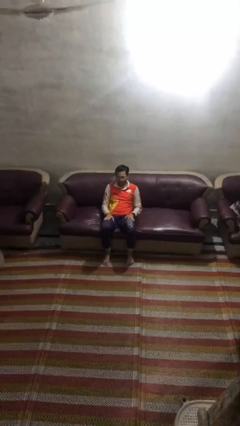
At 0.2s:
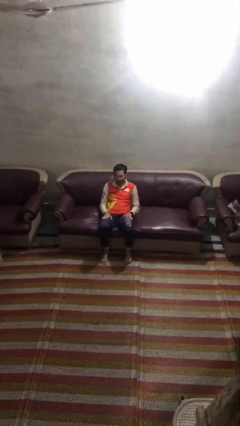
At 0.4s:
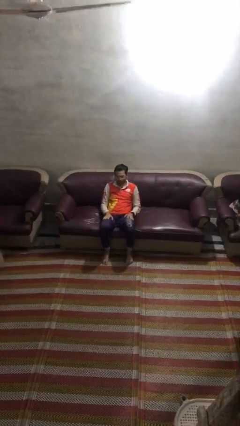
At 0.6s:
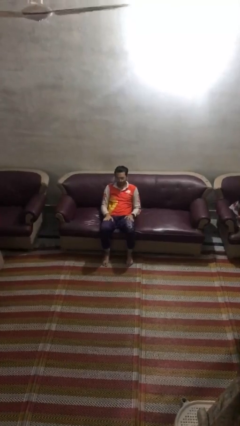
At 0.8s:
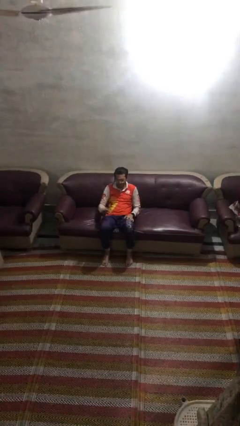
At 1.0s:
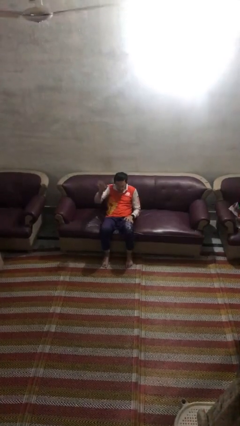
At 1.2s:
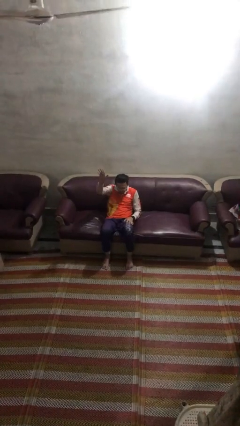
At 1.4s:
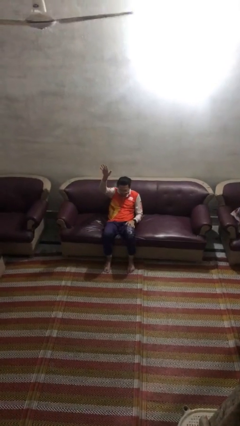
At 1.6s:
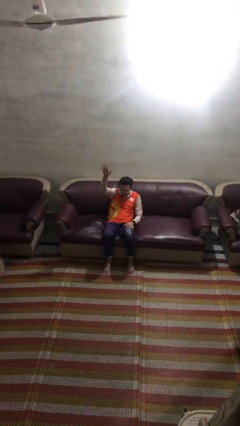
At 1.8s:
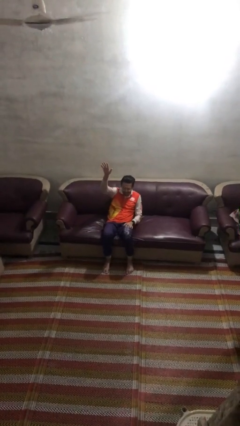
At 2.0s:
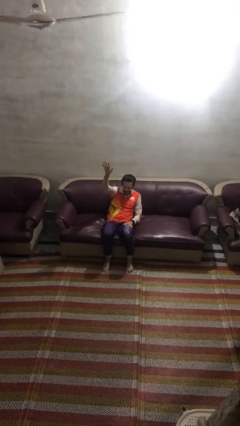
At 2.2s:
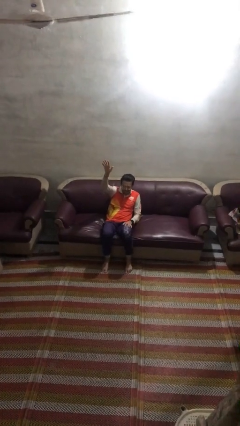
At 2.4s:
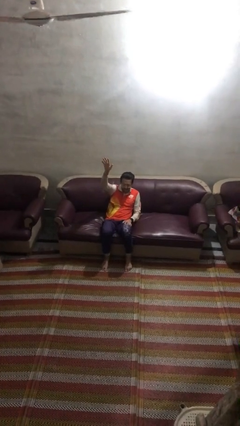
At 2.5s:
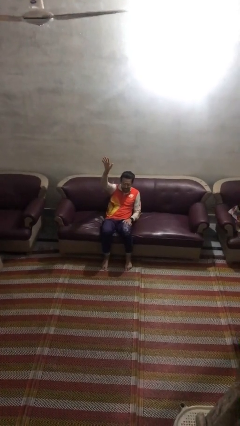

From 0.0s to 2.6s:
person gestures raise hand

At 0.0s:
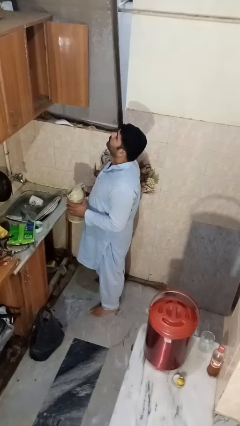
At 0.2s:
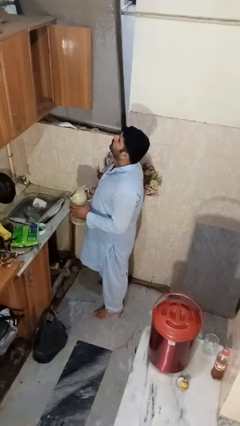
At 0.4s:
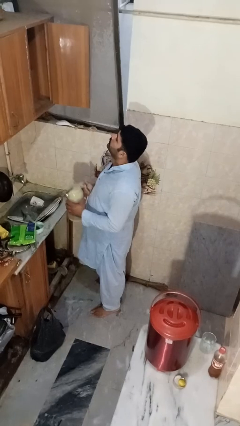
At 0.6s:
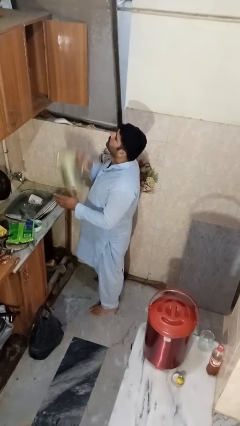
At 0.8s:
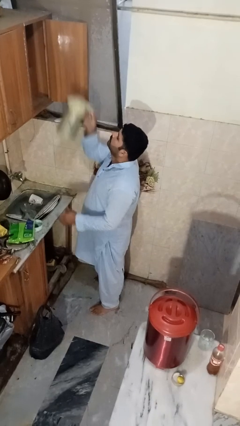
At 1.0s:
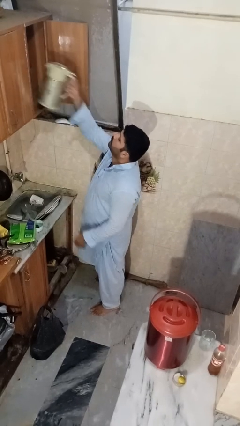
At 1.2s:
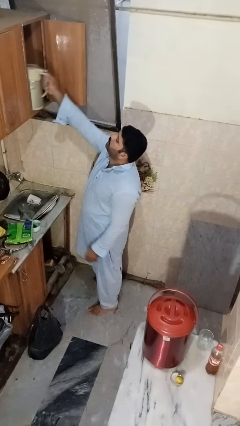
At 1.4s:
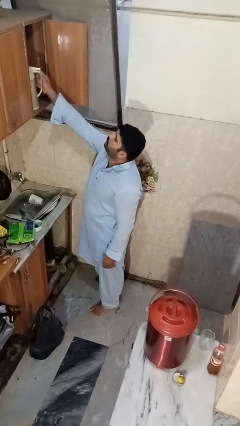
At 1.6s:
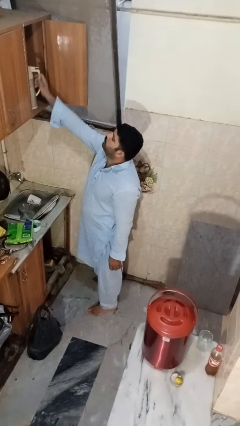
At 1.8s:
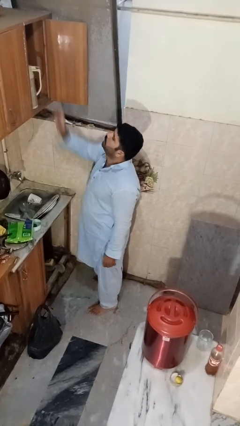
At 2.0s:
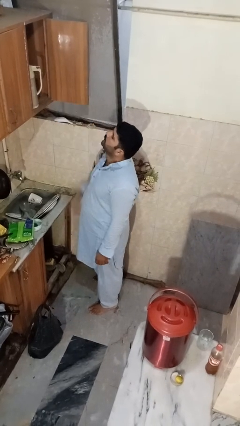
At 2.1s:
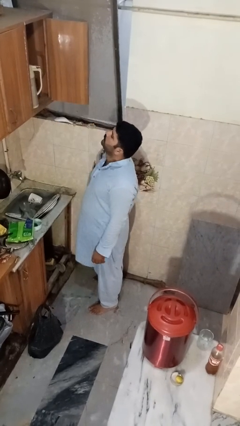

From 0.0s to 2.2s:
person puts object in cabinet

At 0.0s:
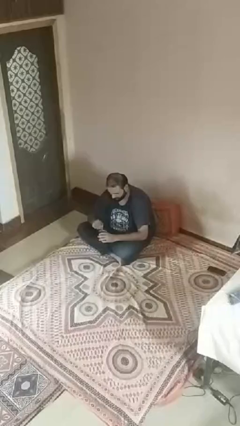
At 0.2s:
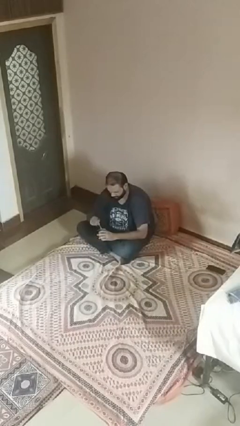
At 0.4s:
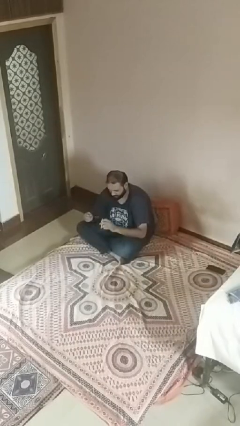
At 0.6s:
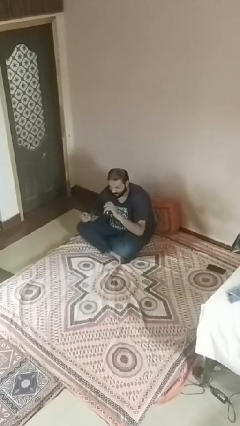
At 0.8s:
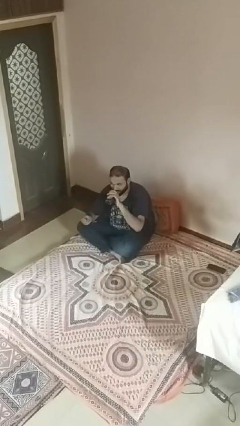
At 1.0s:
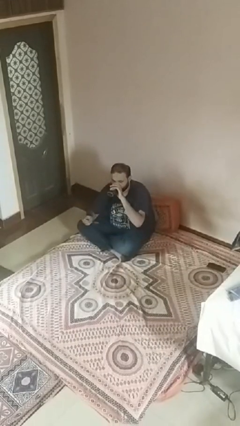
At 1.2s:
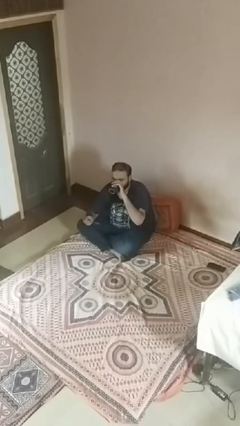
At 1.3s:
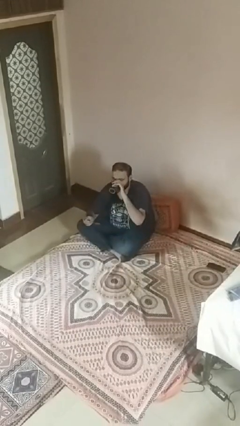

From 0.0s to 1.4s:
person drinks from mug

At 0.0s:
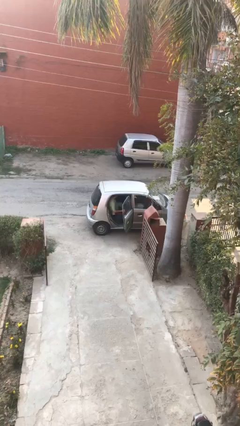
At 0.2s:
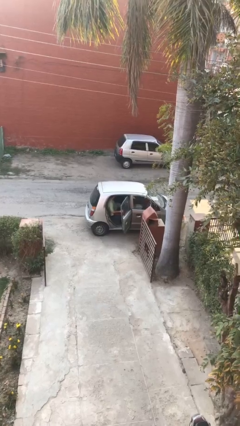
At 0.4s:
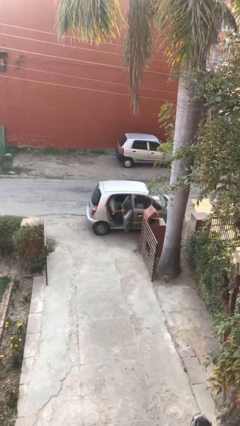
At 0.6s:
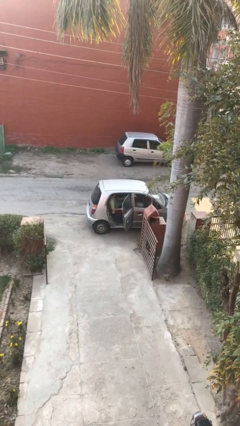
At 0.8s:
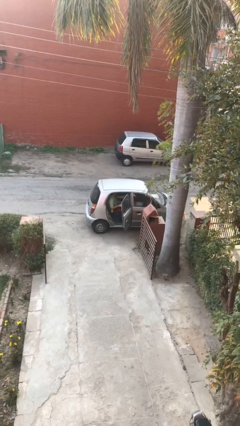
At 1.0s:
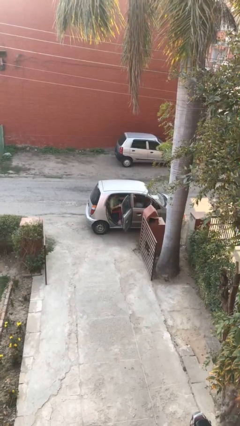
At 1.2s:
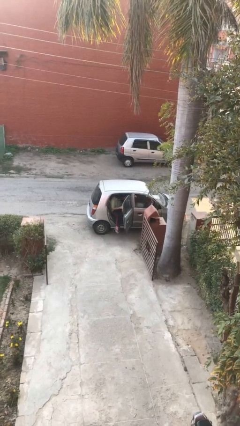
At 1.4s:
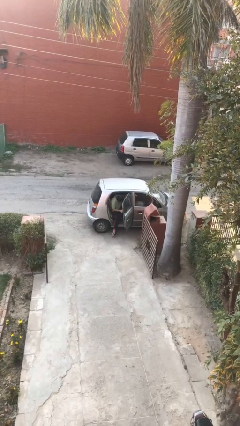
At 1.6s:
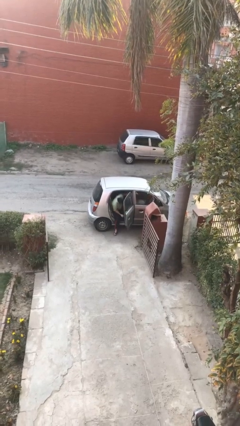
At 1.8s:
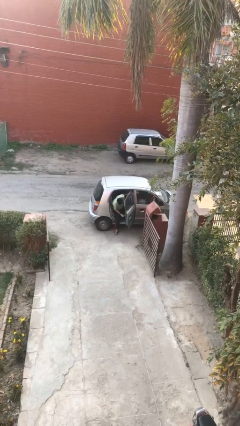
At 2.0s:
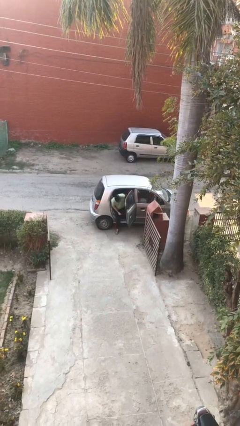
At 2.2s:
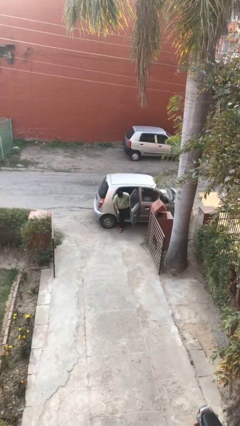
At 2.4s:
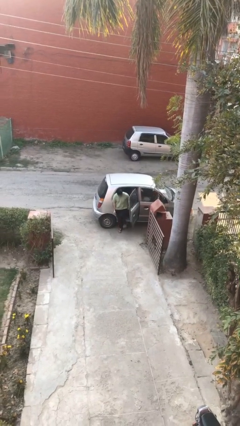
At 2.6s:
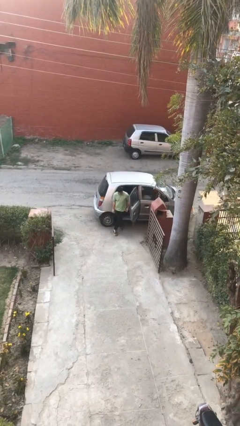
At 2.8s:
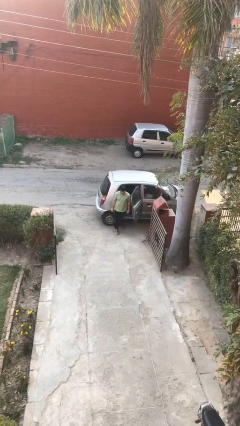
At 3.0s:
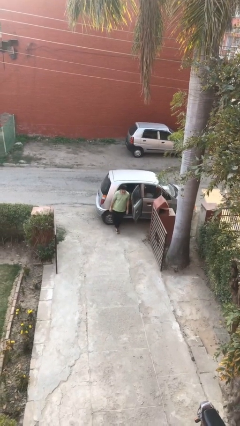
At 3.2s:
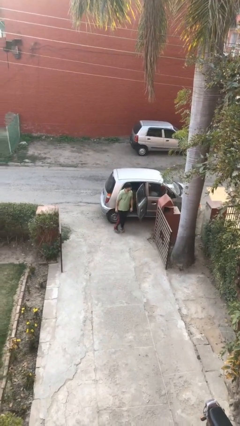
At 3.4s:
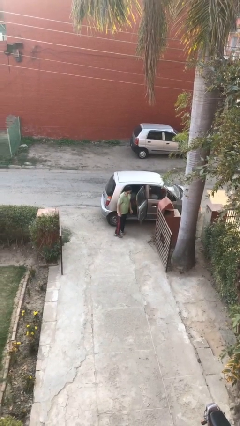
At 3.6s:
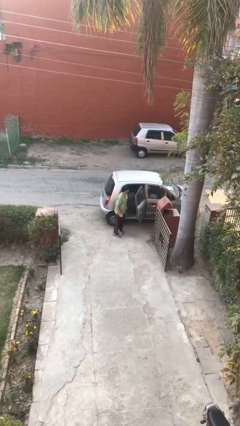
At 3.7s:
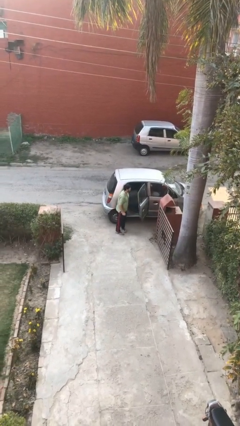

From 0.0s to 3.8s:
person exits car

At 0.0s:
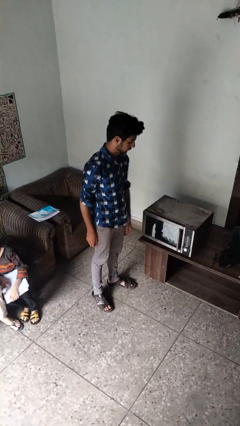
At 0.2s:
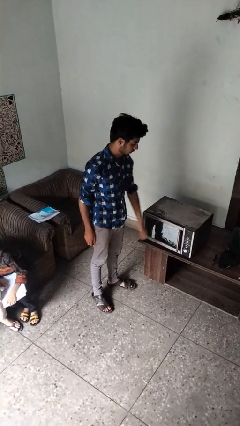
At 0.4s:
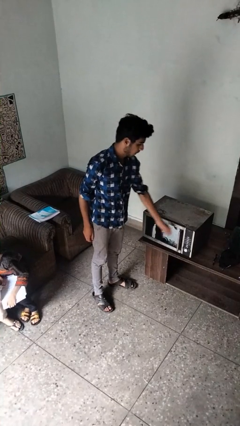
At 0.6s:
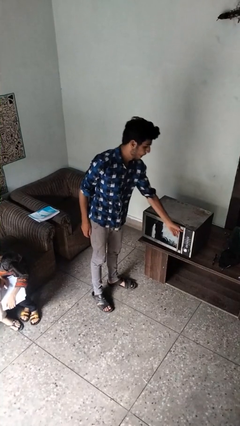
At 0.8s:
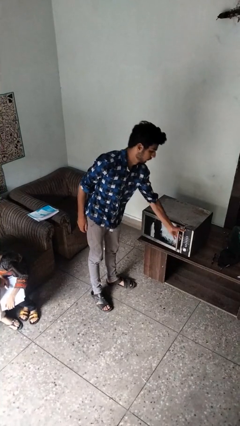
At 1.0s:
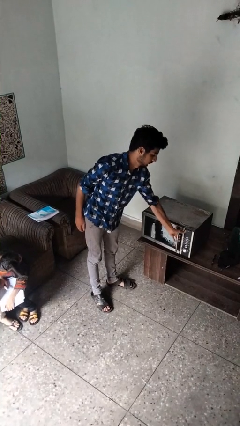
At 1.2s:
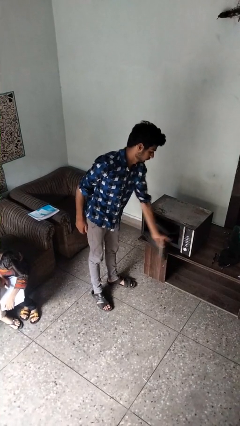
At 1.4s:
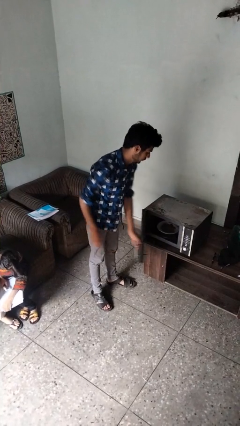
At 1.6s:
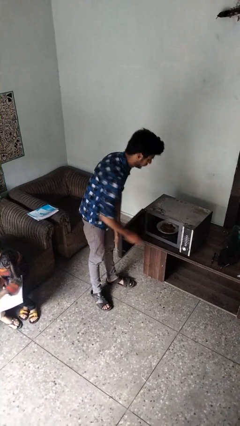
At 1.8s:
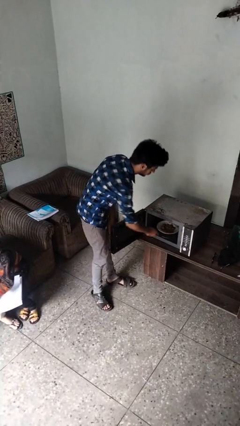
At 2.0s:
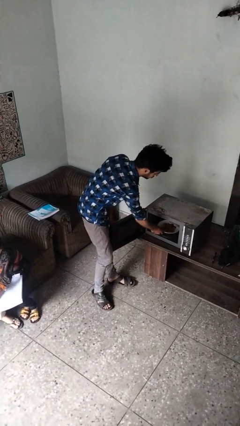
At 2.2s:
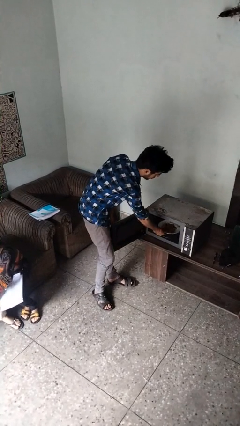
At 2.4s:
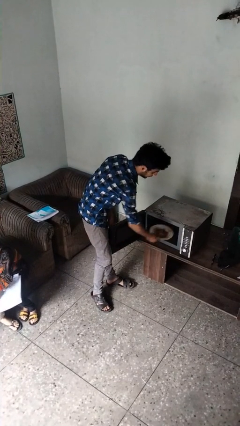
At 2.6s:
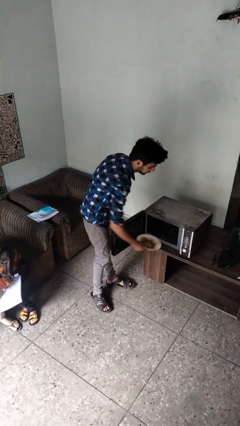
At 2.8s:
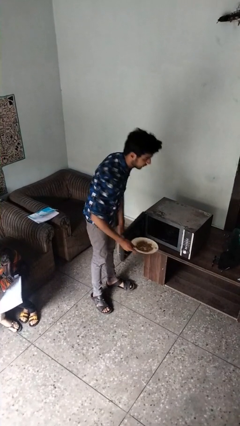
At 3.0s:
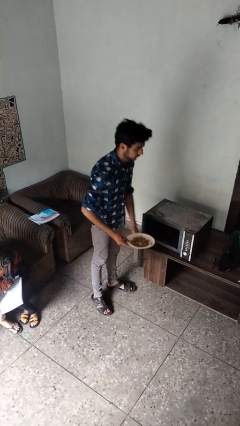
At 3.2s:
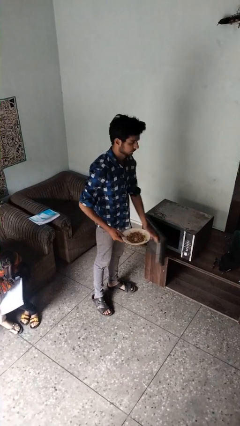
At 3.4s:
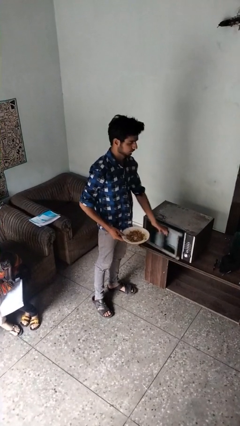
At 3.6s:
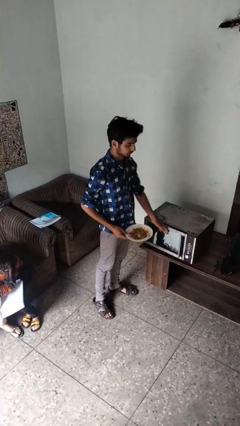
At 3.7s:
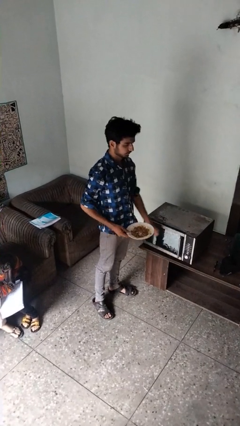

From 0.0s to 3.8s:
person takes object from microwave

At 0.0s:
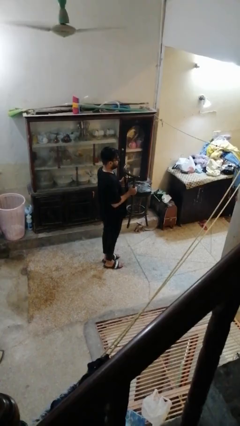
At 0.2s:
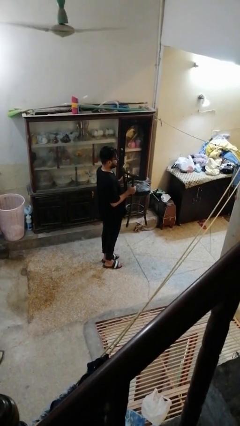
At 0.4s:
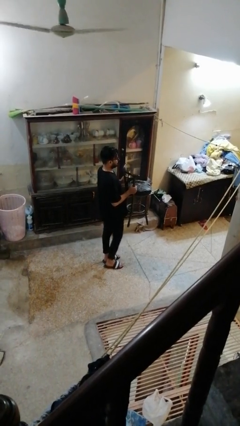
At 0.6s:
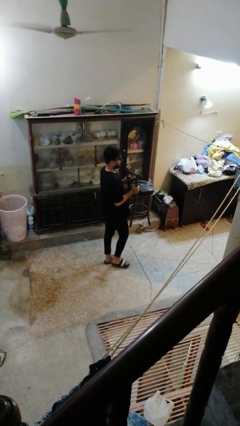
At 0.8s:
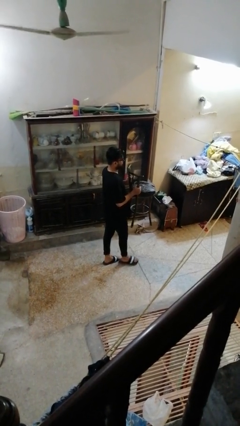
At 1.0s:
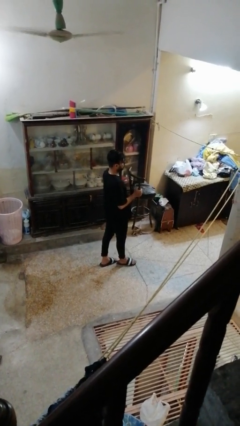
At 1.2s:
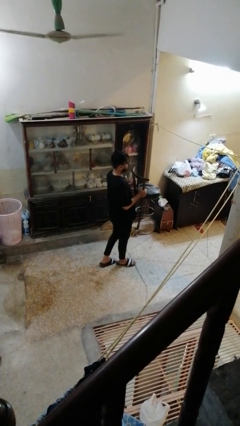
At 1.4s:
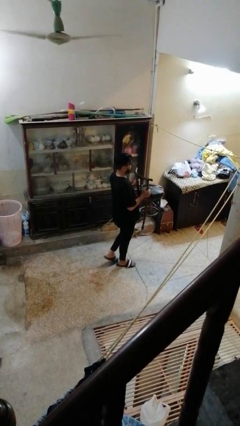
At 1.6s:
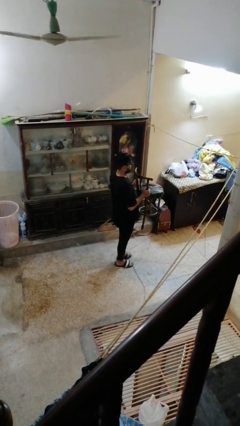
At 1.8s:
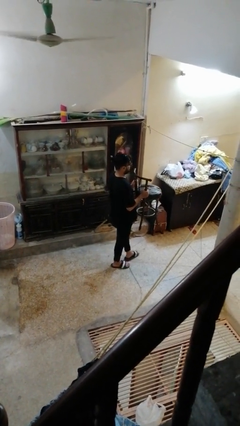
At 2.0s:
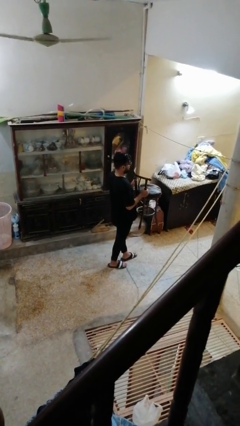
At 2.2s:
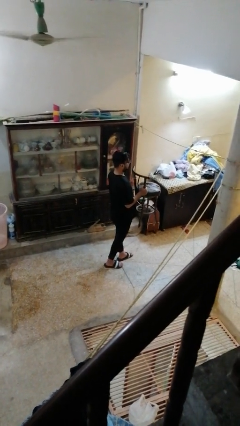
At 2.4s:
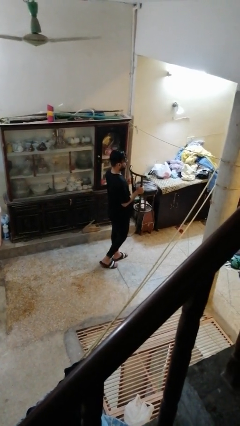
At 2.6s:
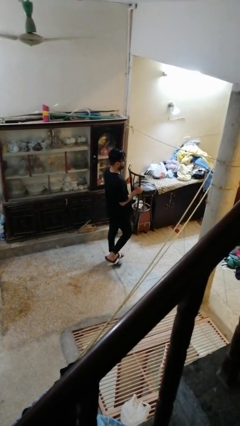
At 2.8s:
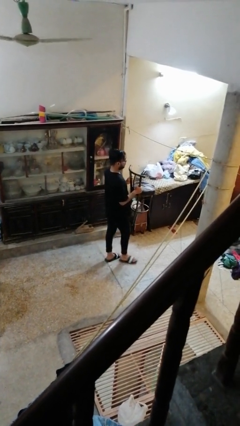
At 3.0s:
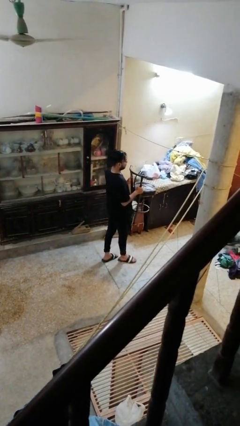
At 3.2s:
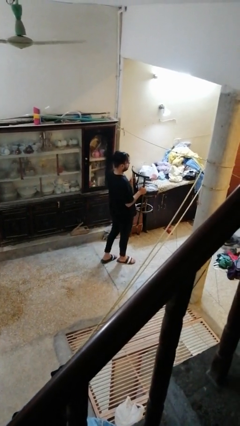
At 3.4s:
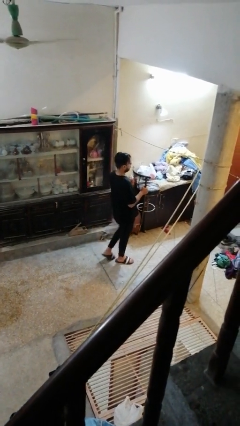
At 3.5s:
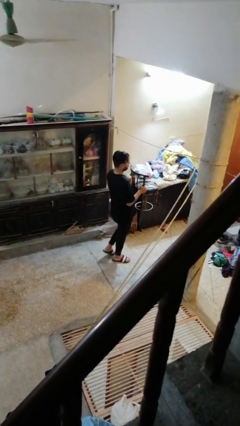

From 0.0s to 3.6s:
person carries furniture

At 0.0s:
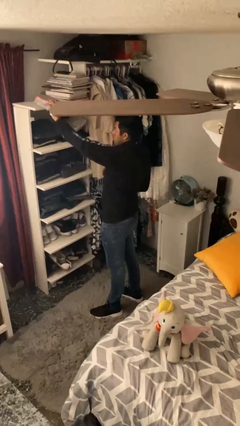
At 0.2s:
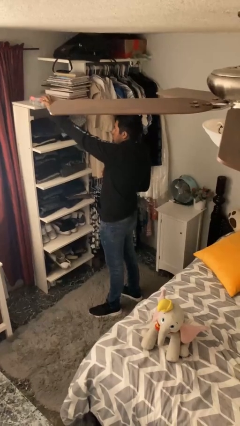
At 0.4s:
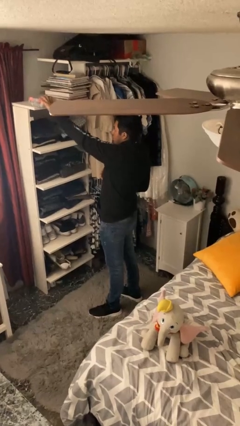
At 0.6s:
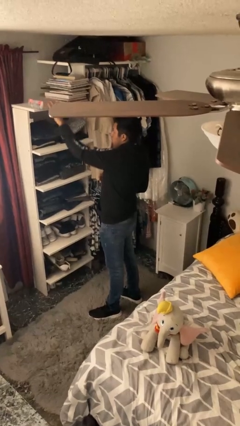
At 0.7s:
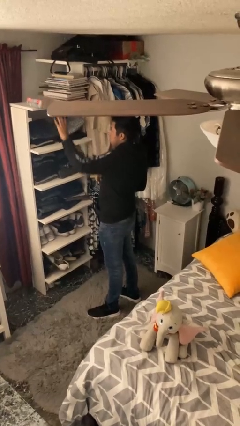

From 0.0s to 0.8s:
person puts down object on shelf
